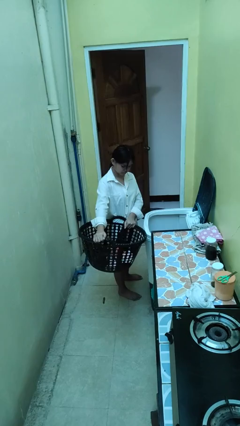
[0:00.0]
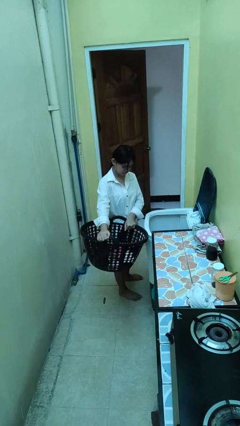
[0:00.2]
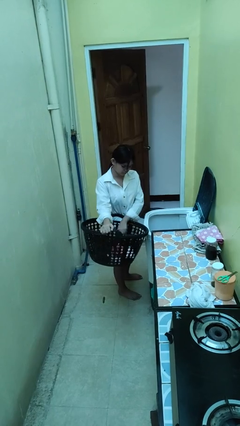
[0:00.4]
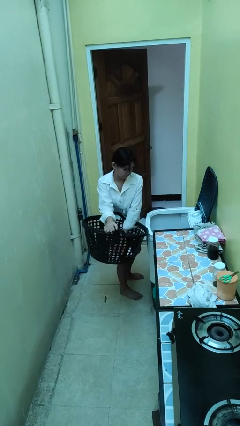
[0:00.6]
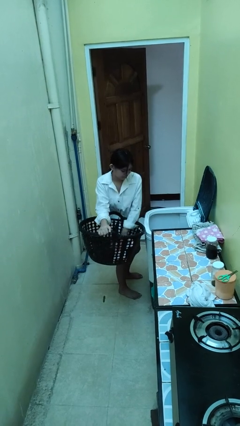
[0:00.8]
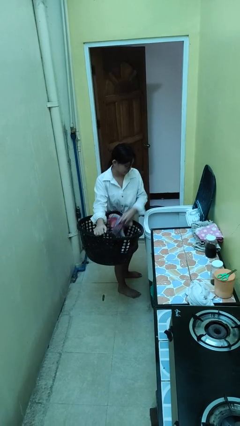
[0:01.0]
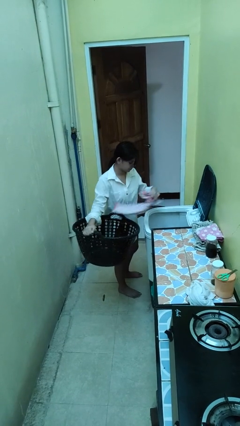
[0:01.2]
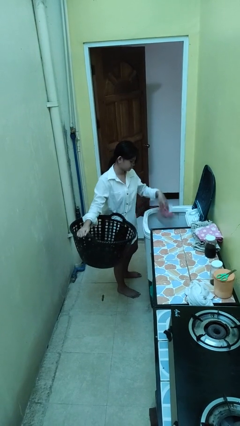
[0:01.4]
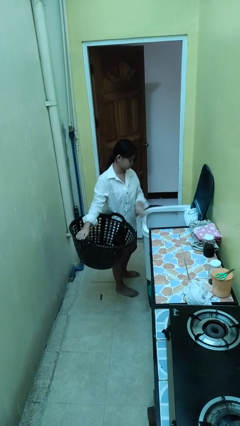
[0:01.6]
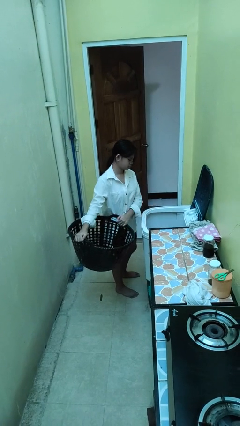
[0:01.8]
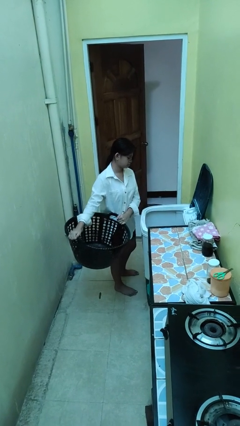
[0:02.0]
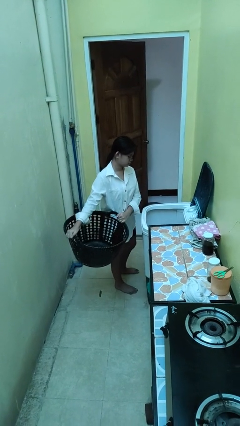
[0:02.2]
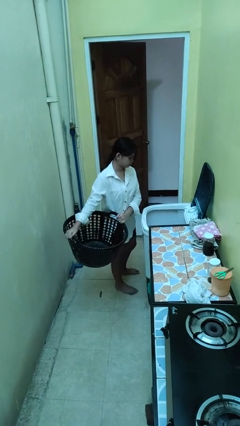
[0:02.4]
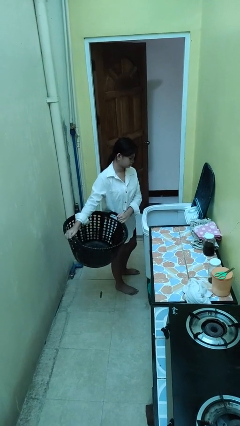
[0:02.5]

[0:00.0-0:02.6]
person loads clotheswasher

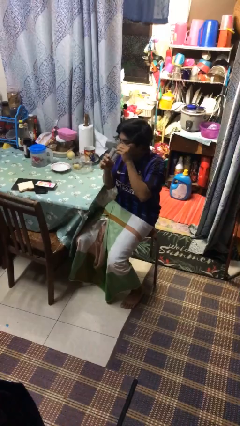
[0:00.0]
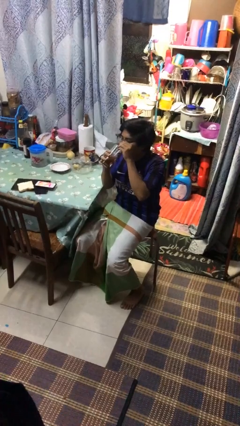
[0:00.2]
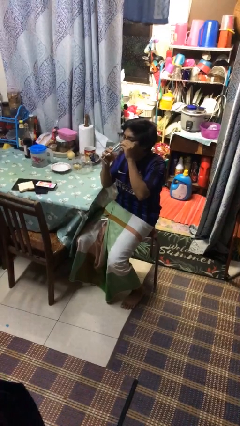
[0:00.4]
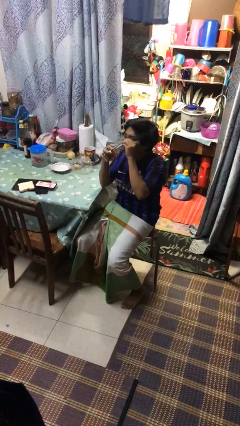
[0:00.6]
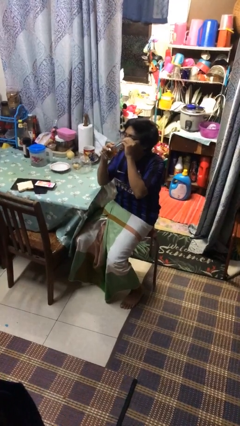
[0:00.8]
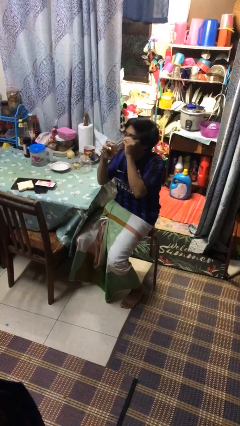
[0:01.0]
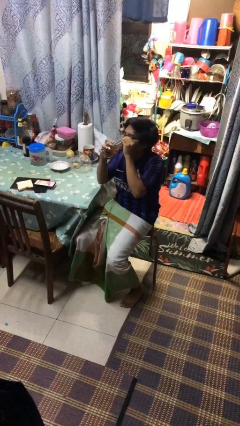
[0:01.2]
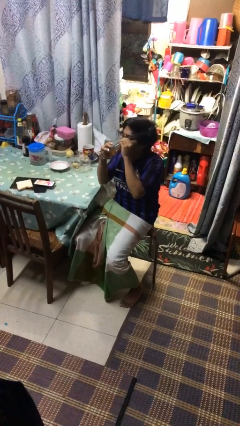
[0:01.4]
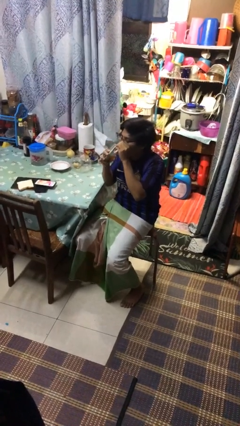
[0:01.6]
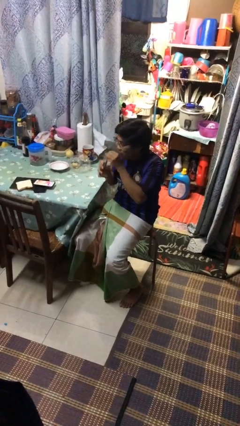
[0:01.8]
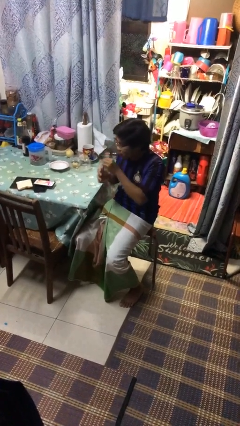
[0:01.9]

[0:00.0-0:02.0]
person drinks from mug

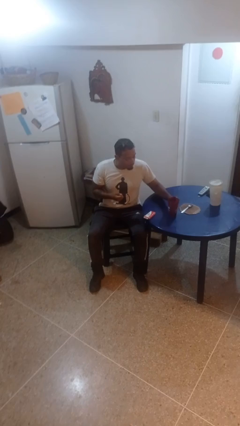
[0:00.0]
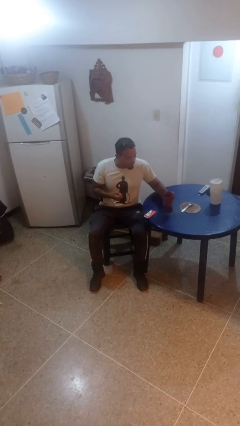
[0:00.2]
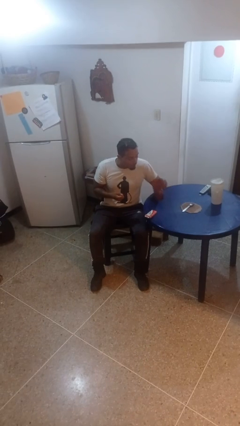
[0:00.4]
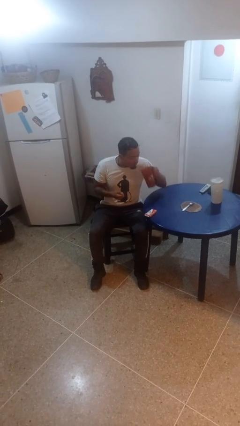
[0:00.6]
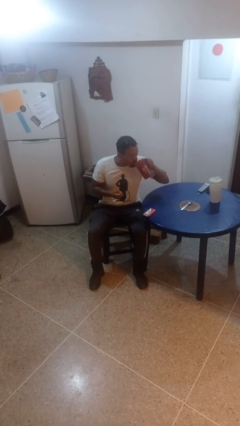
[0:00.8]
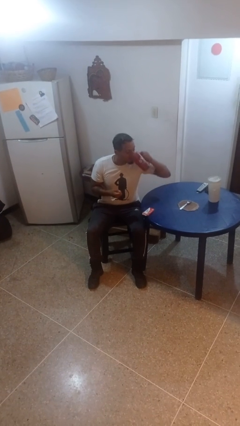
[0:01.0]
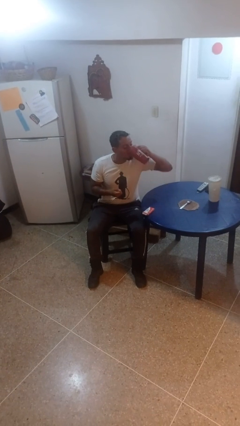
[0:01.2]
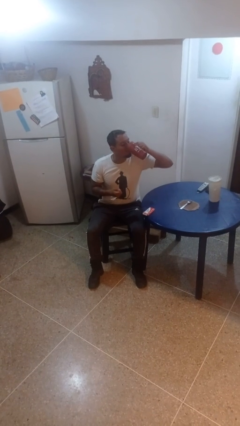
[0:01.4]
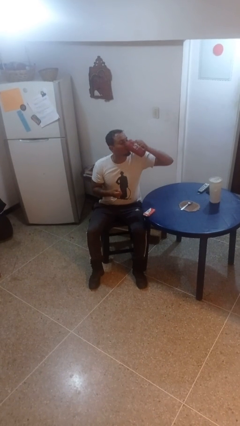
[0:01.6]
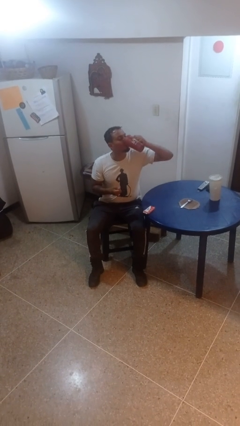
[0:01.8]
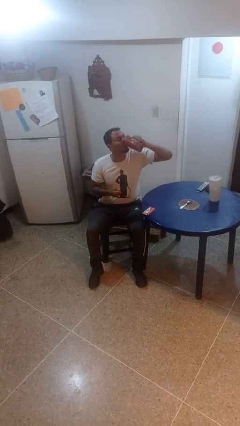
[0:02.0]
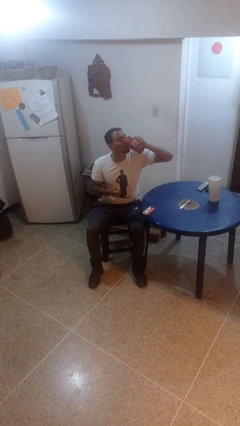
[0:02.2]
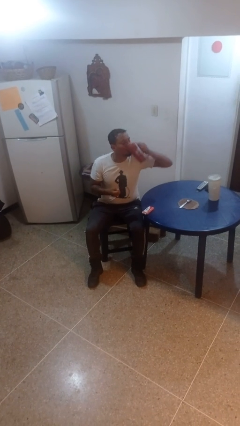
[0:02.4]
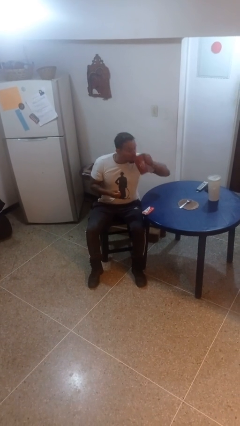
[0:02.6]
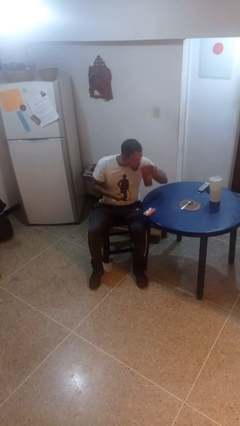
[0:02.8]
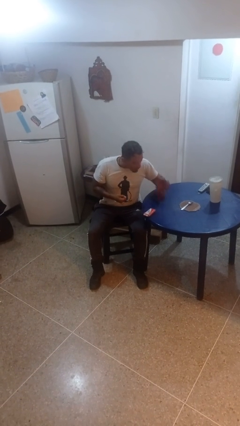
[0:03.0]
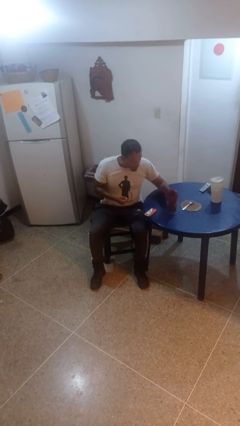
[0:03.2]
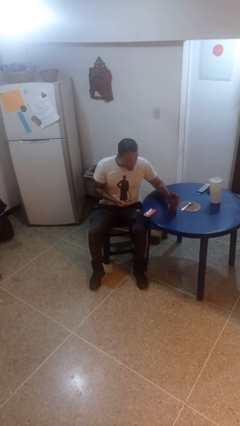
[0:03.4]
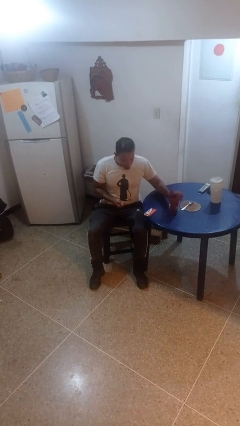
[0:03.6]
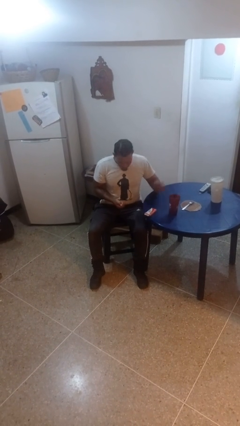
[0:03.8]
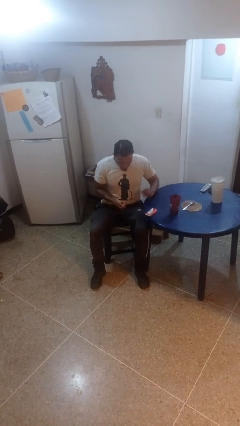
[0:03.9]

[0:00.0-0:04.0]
person drinks from cup

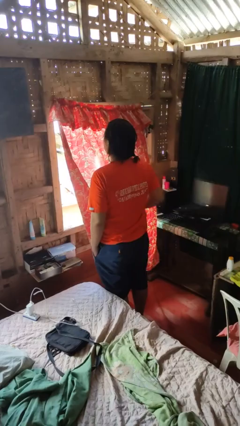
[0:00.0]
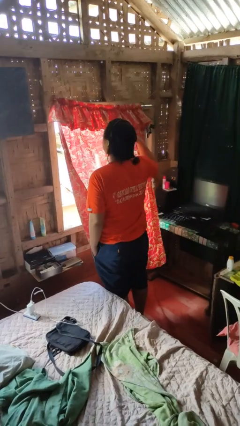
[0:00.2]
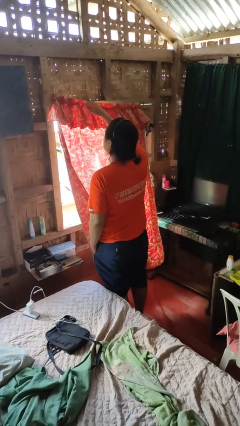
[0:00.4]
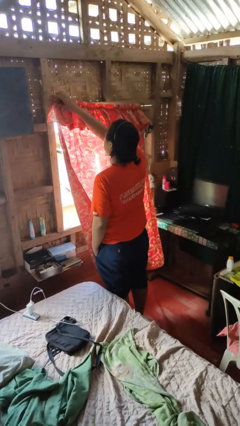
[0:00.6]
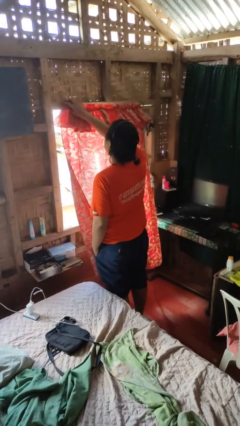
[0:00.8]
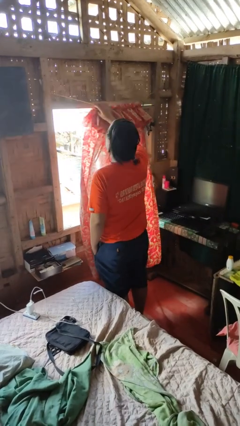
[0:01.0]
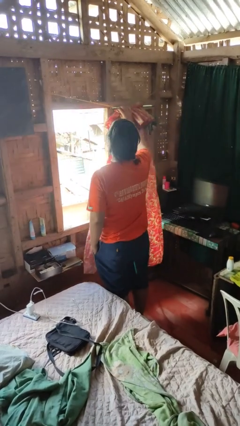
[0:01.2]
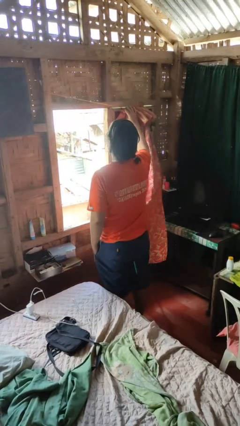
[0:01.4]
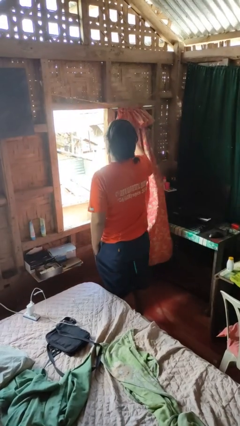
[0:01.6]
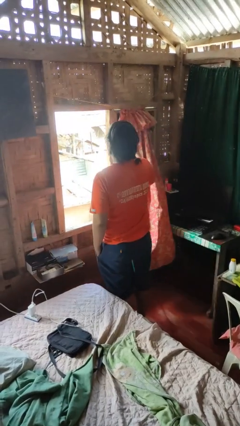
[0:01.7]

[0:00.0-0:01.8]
person opens curtains

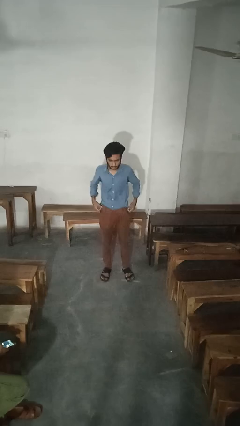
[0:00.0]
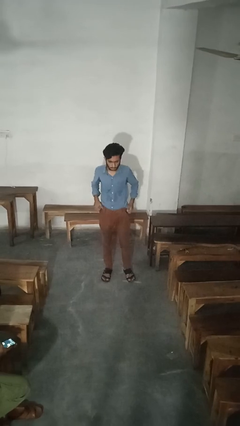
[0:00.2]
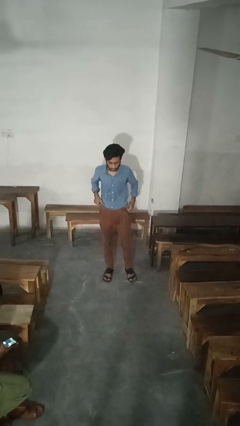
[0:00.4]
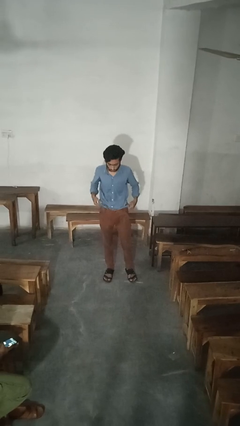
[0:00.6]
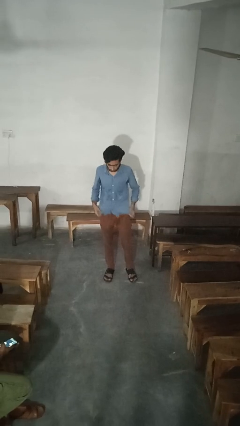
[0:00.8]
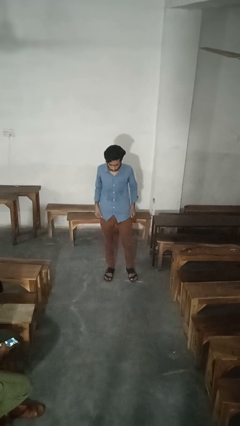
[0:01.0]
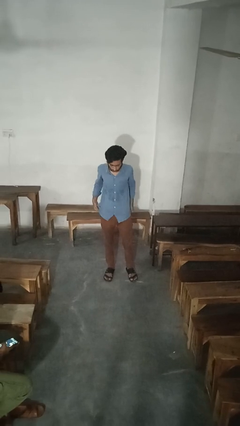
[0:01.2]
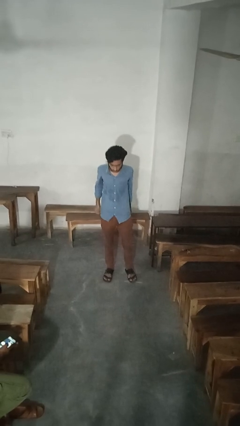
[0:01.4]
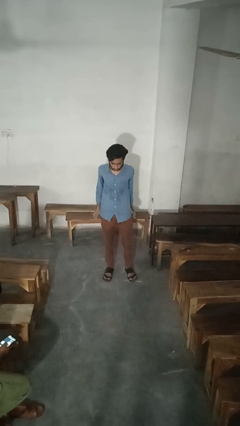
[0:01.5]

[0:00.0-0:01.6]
person untucks shirt

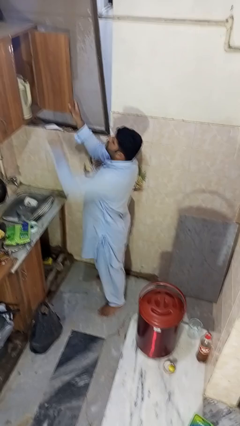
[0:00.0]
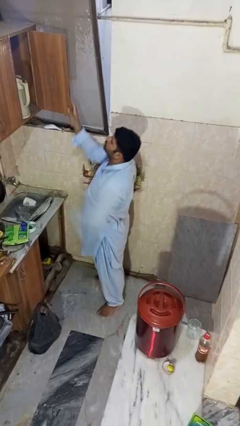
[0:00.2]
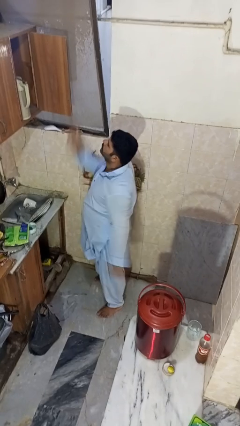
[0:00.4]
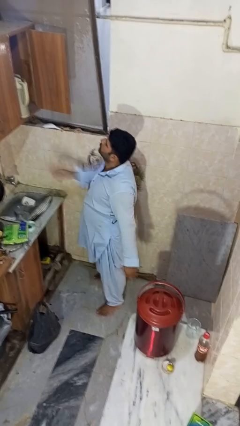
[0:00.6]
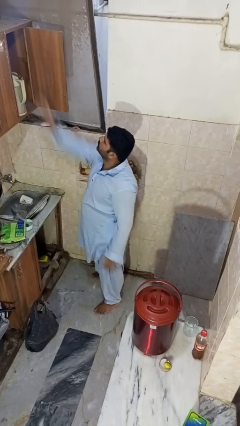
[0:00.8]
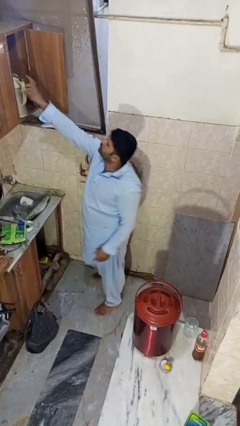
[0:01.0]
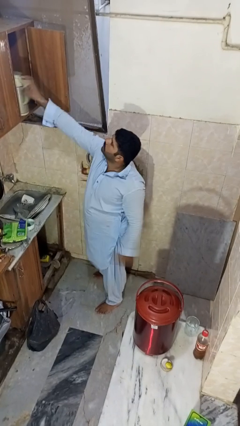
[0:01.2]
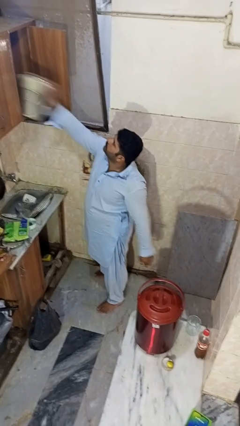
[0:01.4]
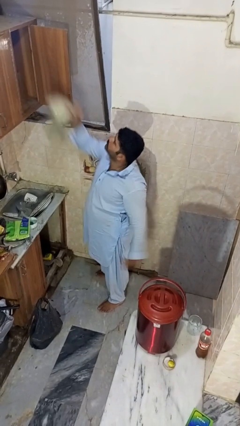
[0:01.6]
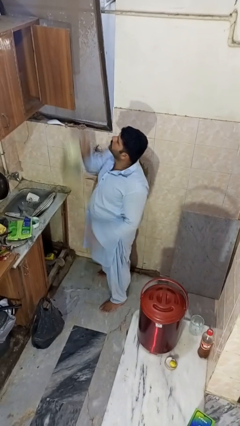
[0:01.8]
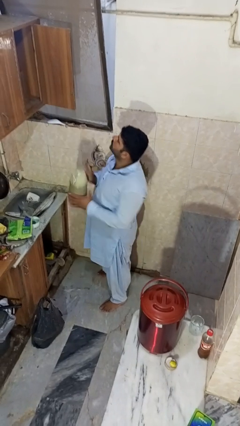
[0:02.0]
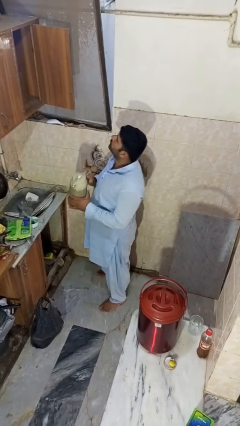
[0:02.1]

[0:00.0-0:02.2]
person takes object from cabinet

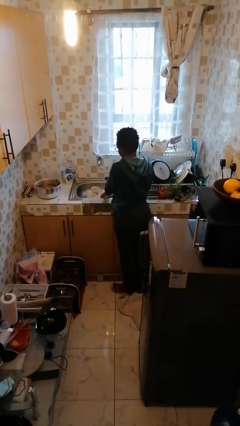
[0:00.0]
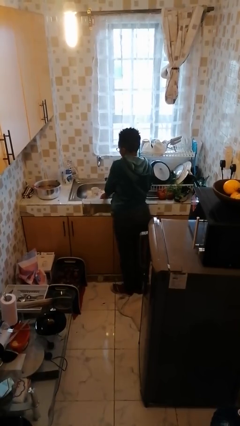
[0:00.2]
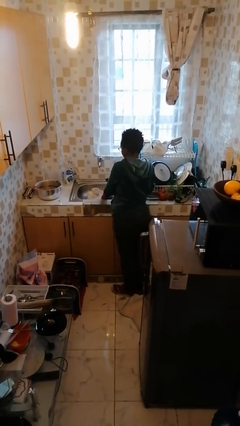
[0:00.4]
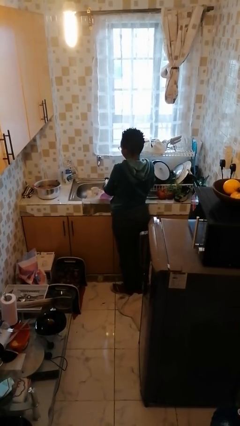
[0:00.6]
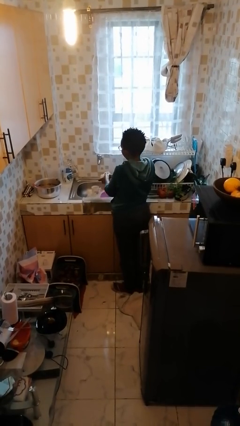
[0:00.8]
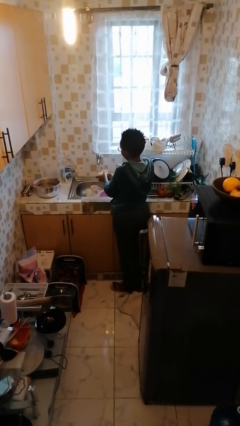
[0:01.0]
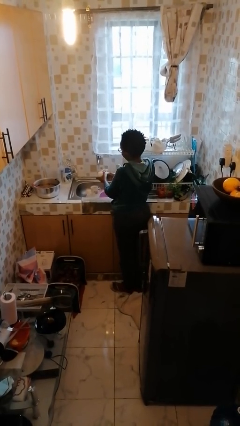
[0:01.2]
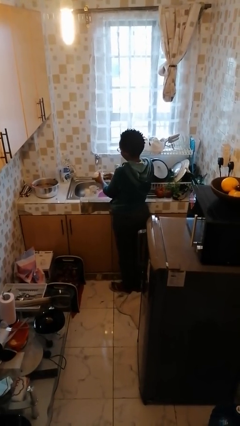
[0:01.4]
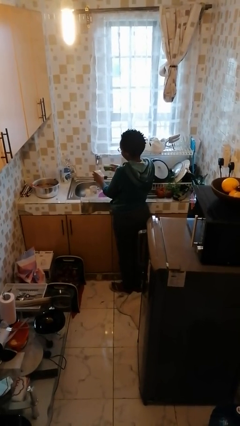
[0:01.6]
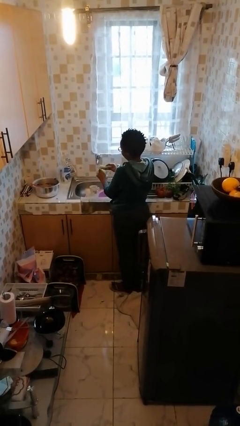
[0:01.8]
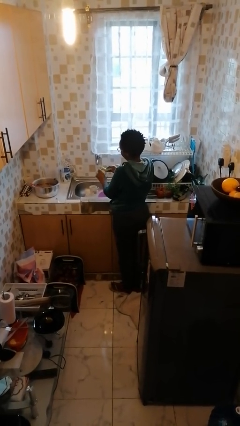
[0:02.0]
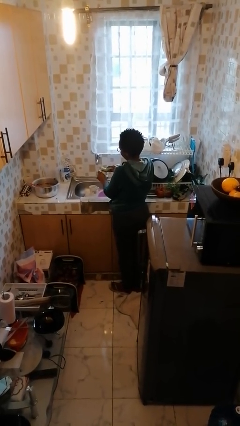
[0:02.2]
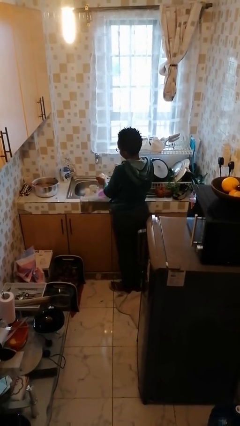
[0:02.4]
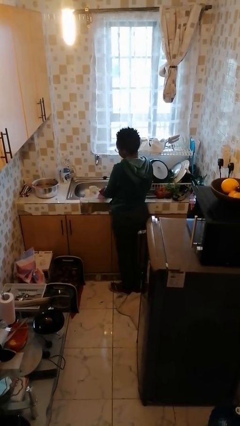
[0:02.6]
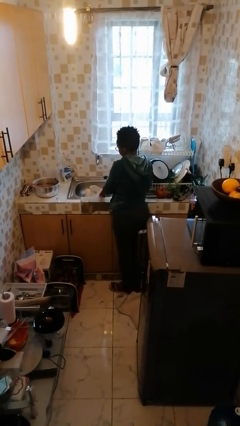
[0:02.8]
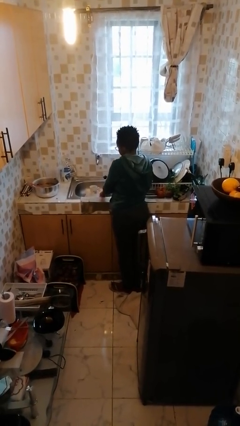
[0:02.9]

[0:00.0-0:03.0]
person washes dish
